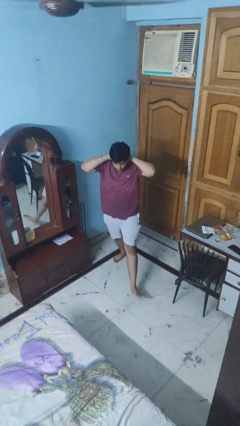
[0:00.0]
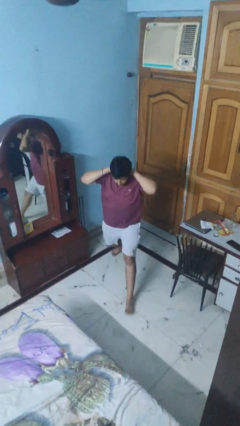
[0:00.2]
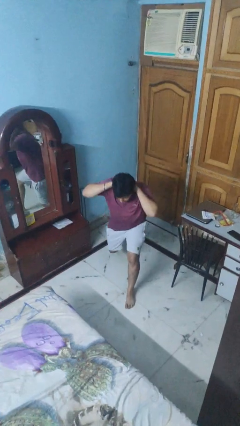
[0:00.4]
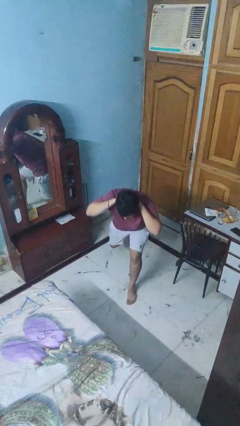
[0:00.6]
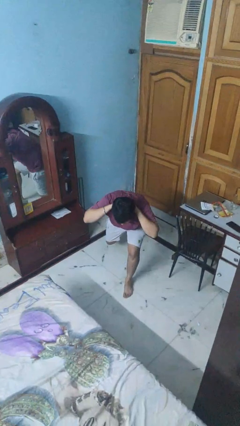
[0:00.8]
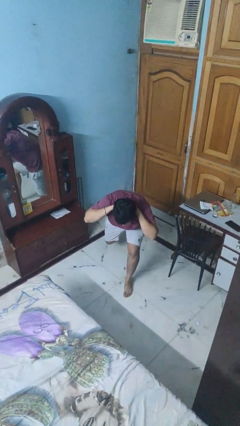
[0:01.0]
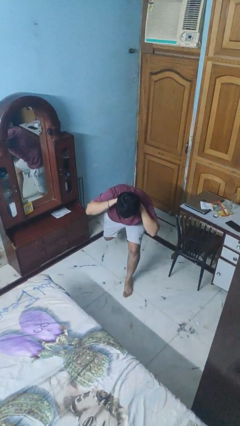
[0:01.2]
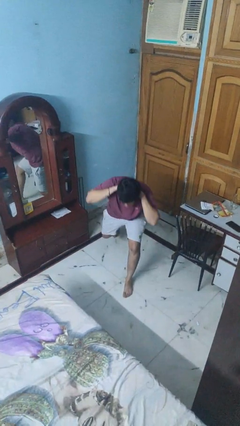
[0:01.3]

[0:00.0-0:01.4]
person exercises with lunges

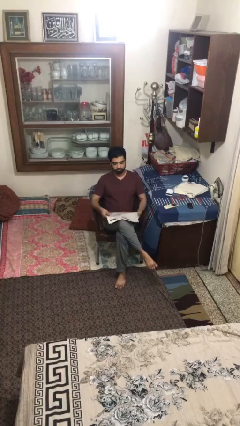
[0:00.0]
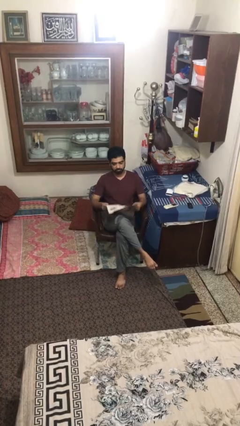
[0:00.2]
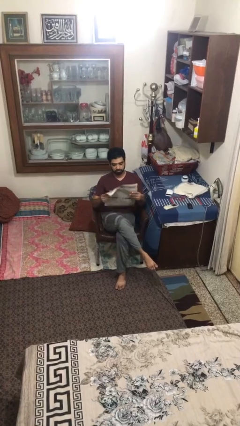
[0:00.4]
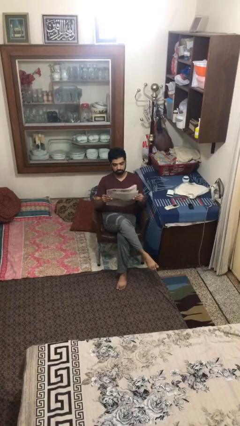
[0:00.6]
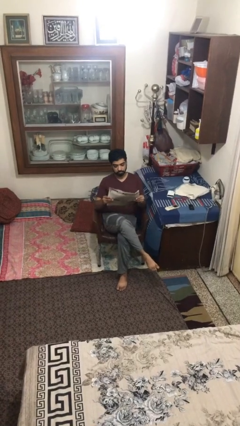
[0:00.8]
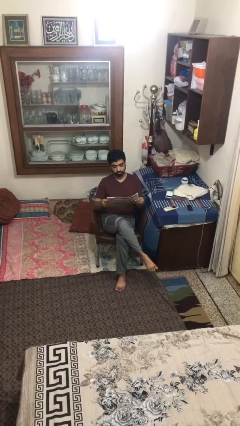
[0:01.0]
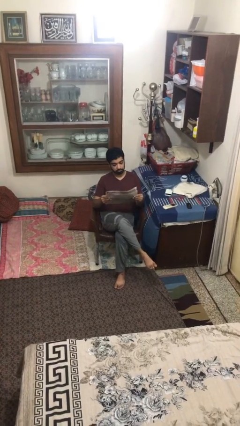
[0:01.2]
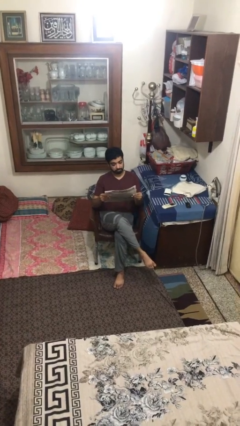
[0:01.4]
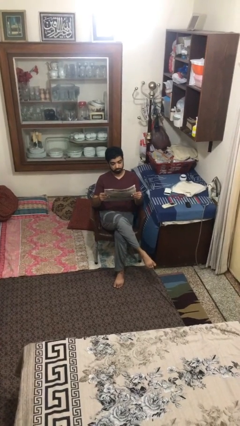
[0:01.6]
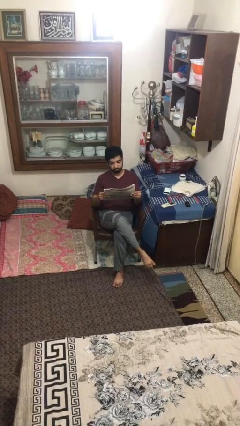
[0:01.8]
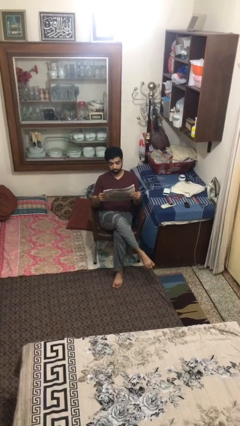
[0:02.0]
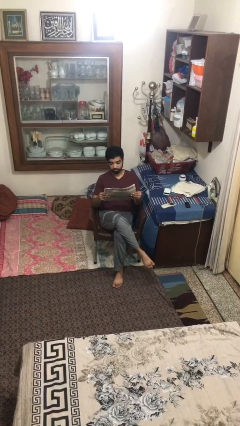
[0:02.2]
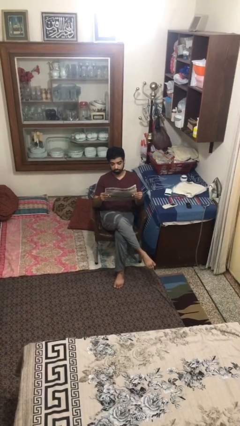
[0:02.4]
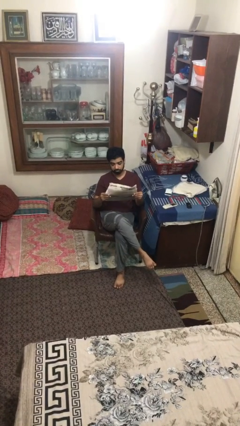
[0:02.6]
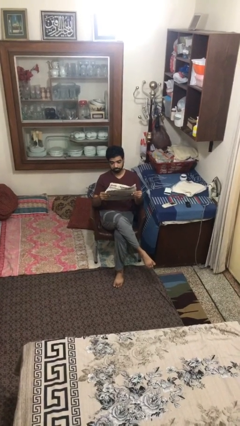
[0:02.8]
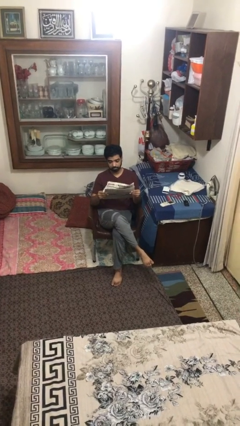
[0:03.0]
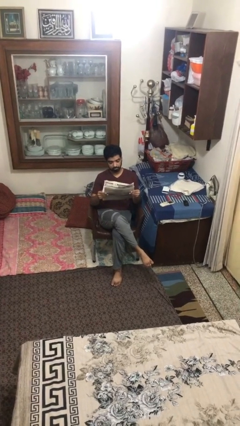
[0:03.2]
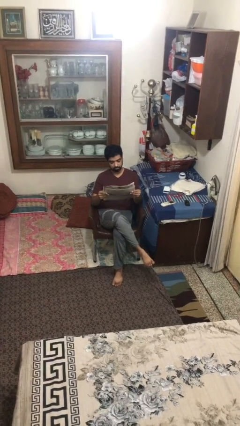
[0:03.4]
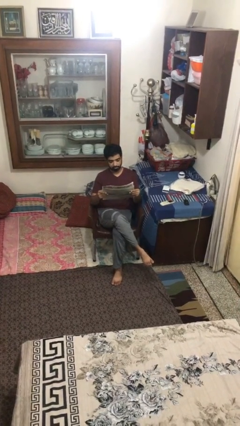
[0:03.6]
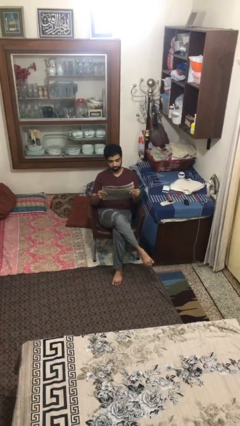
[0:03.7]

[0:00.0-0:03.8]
person reads document

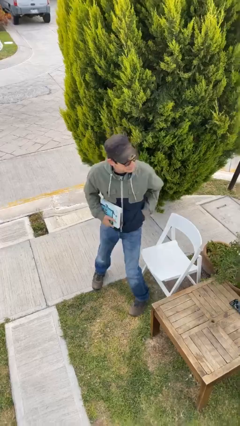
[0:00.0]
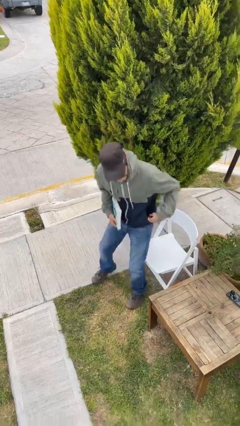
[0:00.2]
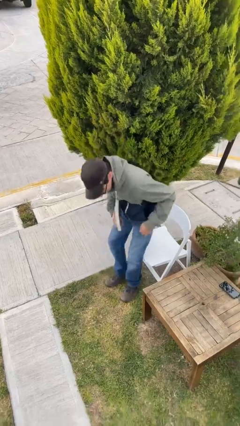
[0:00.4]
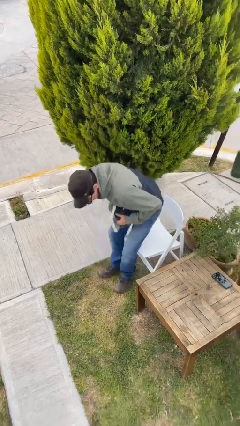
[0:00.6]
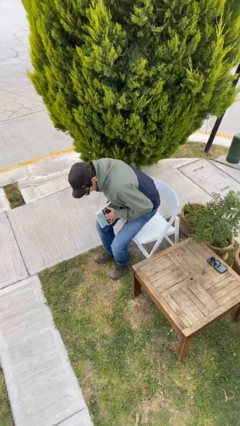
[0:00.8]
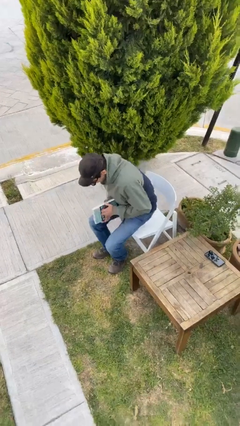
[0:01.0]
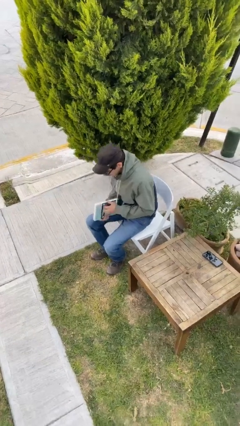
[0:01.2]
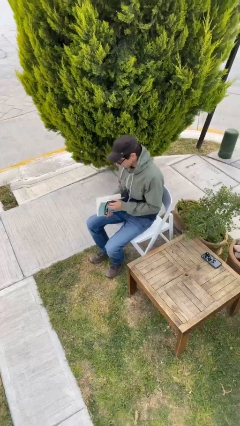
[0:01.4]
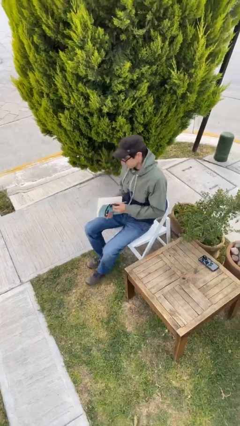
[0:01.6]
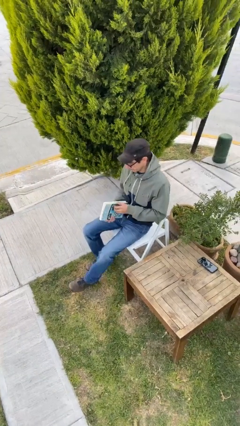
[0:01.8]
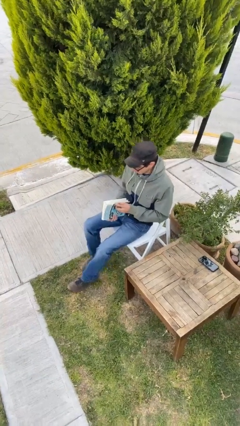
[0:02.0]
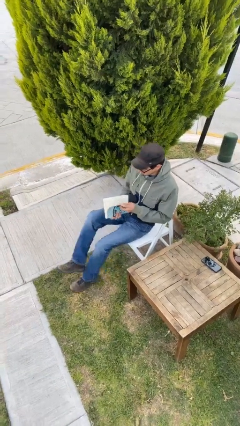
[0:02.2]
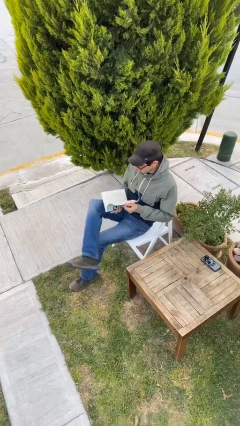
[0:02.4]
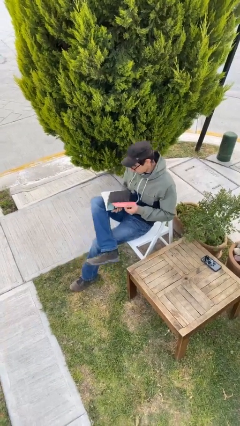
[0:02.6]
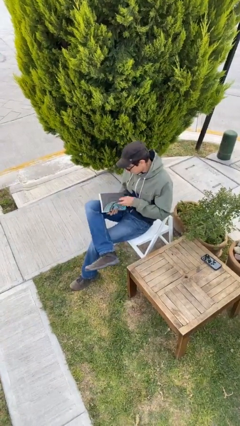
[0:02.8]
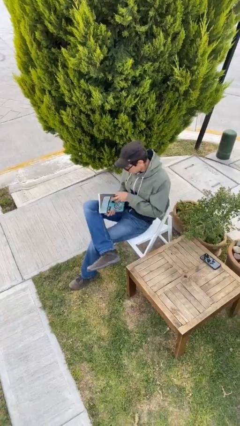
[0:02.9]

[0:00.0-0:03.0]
person sits down

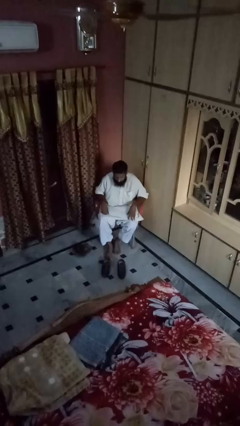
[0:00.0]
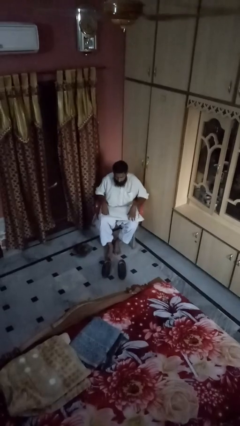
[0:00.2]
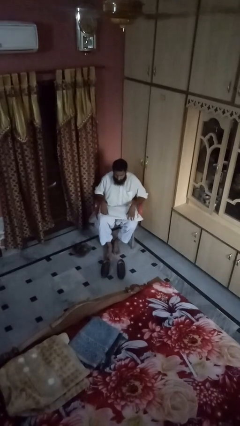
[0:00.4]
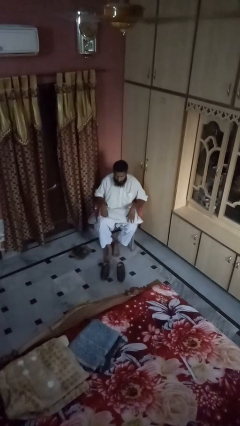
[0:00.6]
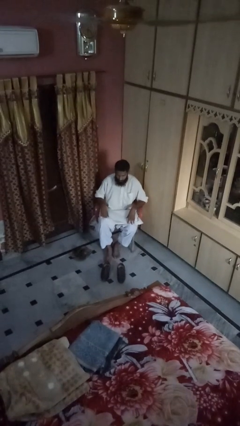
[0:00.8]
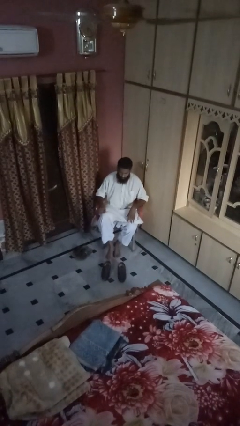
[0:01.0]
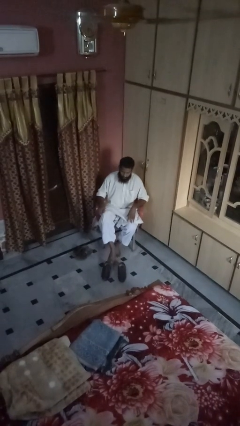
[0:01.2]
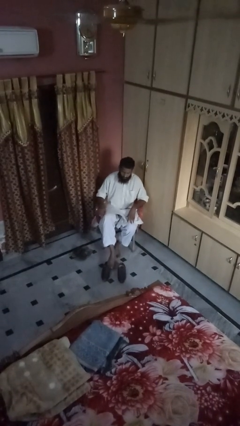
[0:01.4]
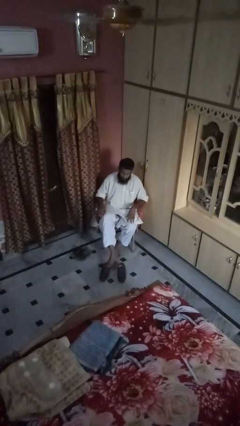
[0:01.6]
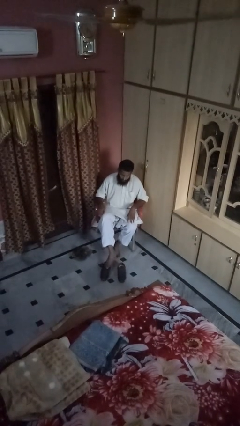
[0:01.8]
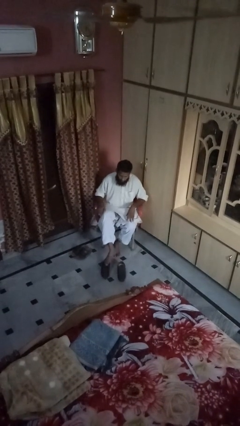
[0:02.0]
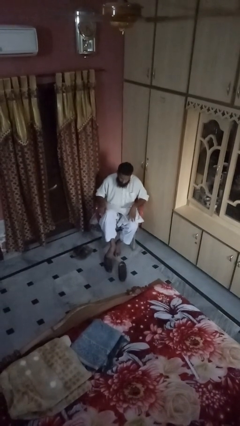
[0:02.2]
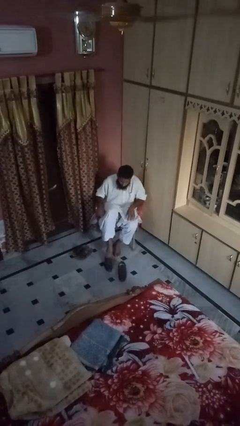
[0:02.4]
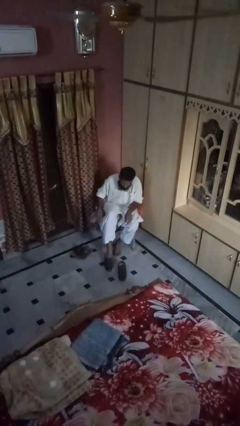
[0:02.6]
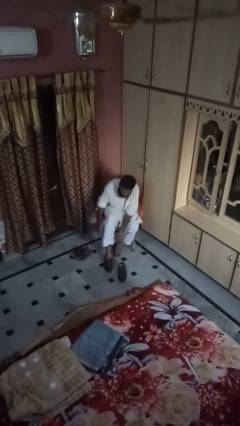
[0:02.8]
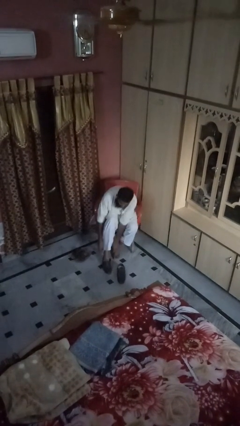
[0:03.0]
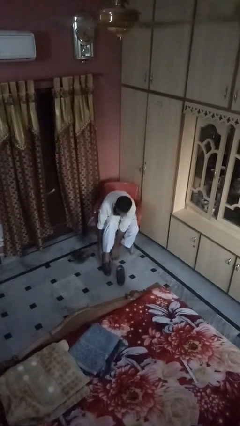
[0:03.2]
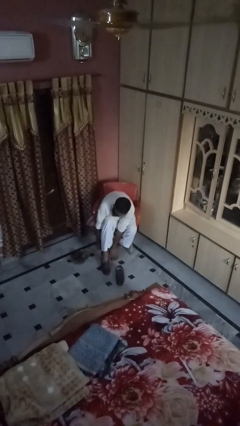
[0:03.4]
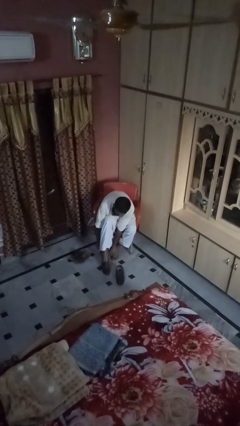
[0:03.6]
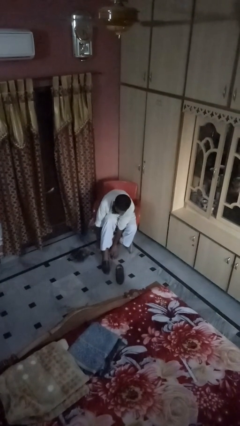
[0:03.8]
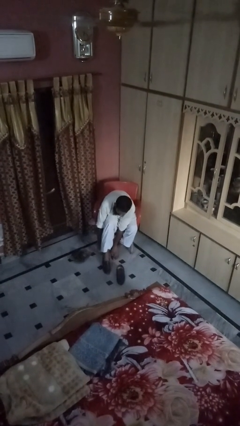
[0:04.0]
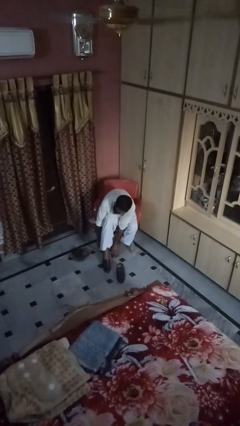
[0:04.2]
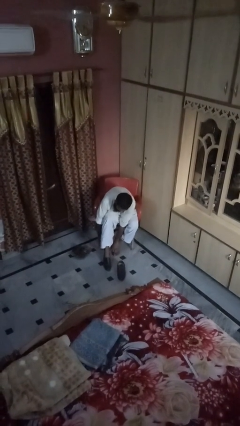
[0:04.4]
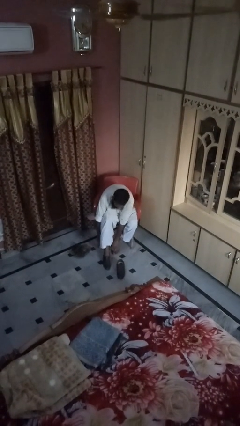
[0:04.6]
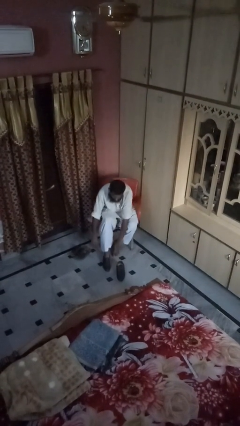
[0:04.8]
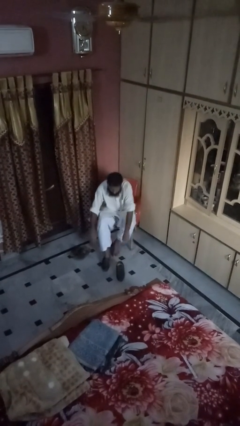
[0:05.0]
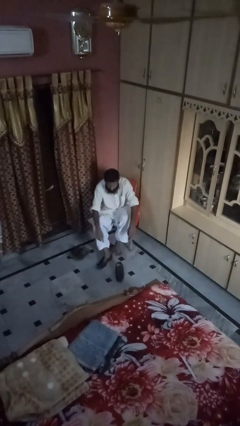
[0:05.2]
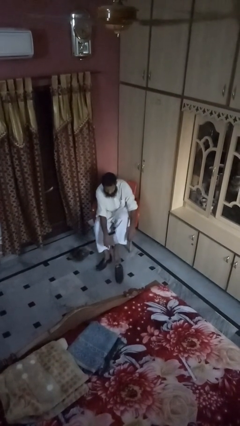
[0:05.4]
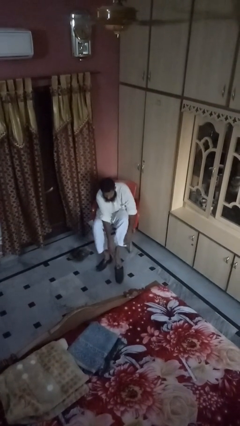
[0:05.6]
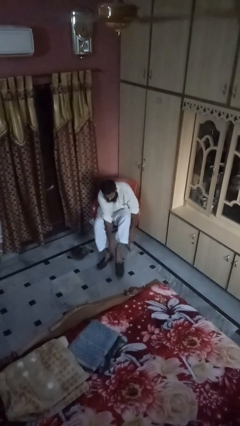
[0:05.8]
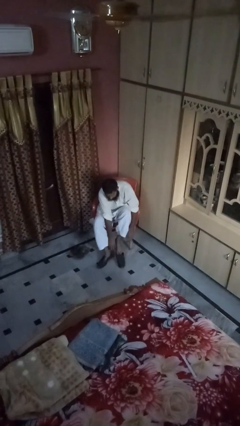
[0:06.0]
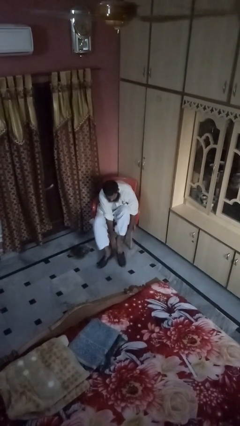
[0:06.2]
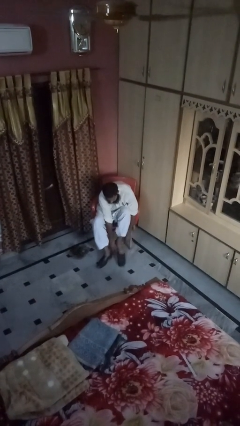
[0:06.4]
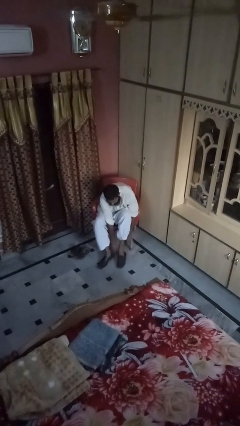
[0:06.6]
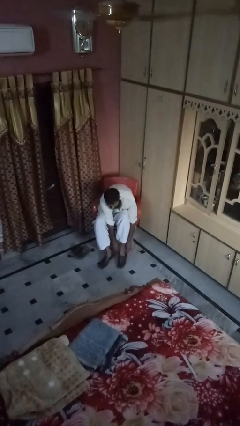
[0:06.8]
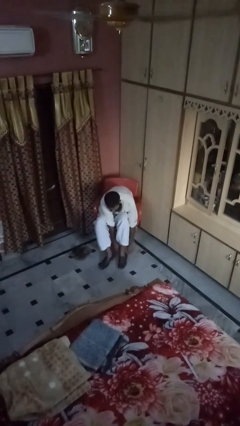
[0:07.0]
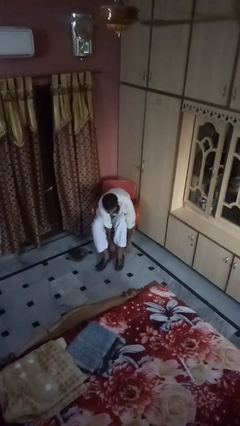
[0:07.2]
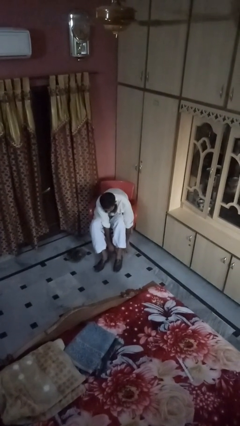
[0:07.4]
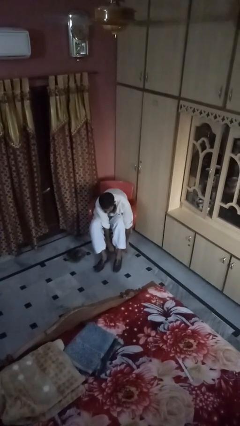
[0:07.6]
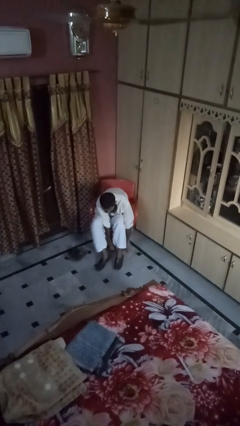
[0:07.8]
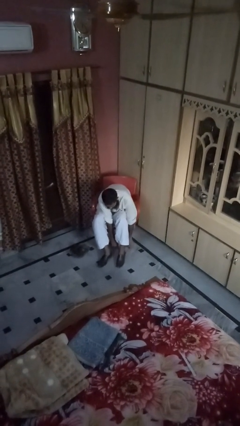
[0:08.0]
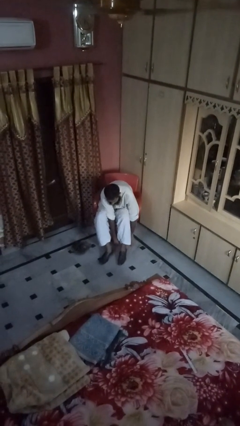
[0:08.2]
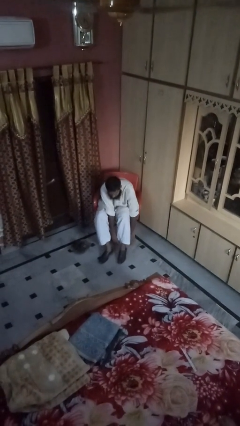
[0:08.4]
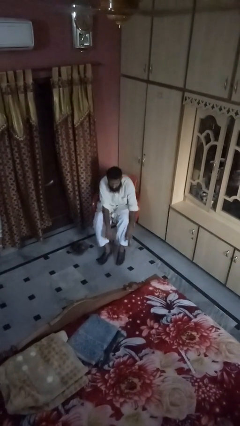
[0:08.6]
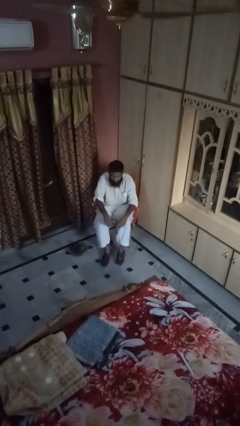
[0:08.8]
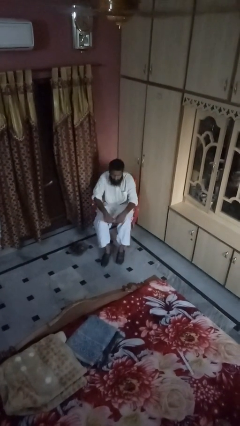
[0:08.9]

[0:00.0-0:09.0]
person puts on boots

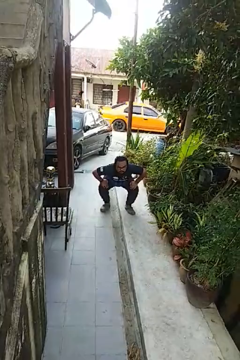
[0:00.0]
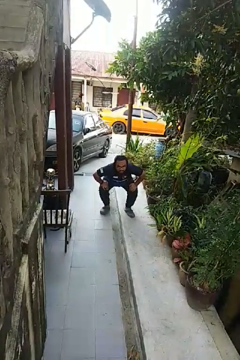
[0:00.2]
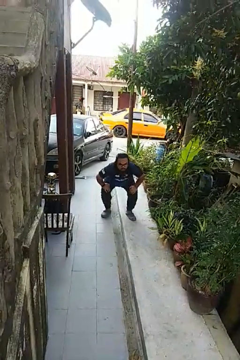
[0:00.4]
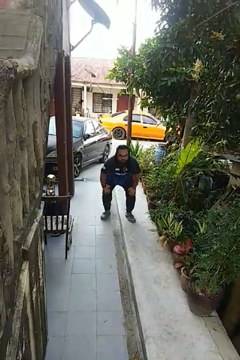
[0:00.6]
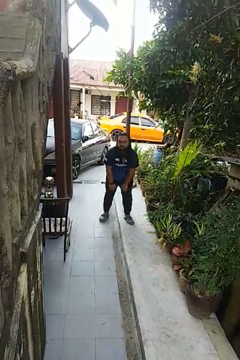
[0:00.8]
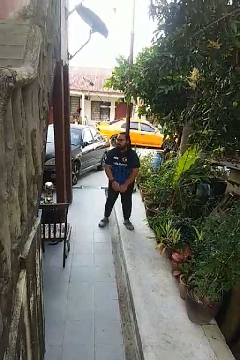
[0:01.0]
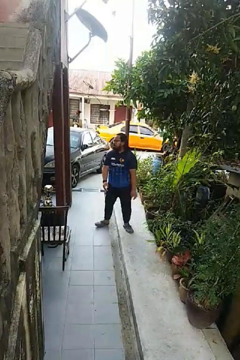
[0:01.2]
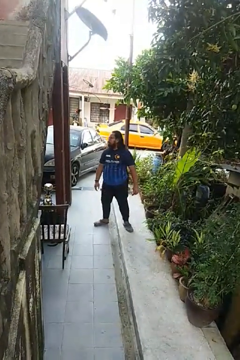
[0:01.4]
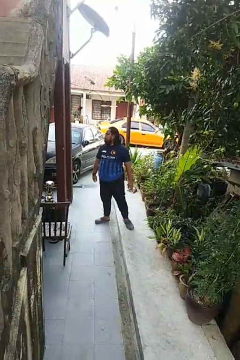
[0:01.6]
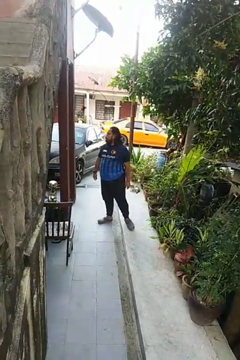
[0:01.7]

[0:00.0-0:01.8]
person stands up
